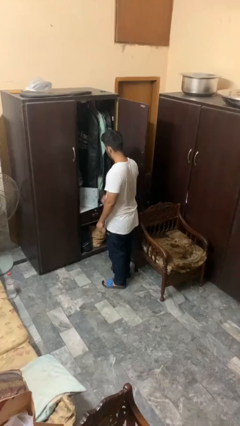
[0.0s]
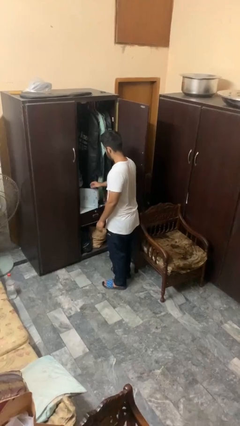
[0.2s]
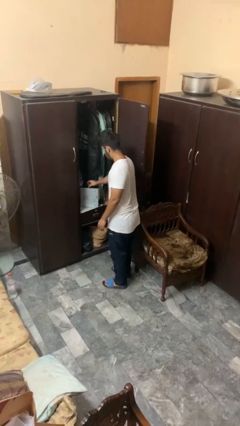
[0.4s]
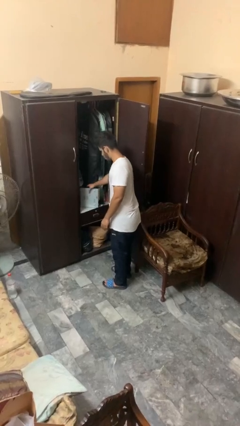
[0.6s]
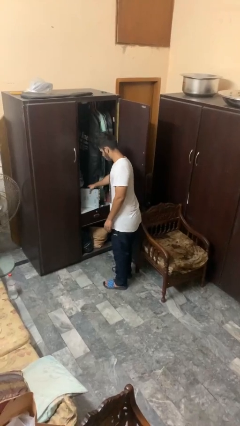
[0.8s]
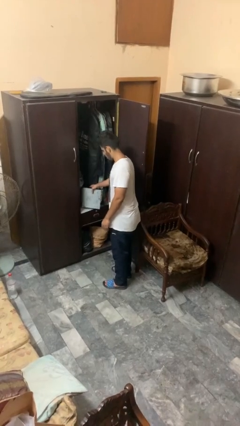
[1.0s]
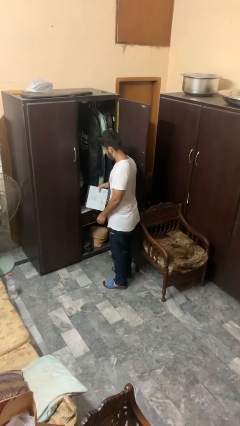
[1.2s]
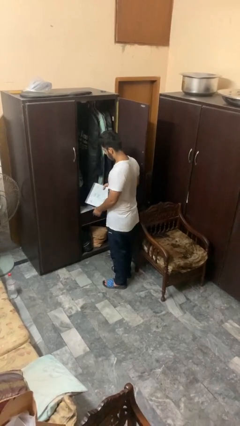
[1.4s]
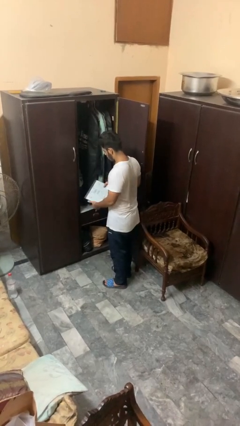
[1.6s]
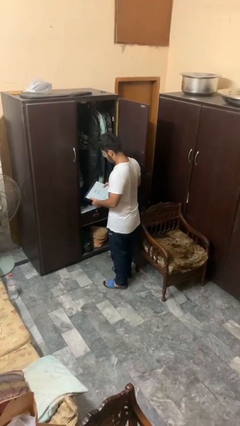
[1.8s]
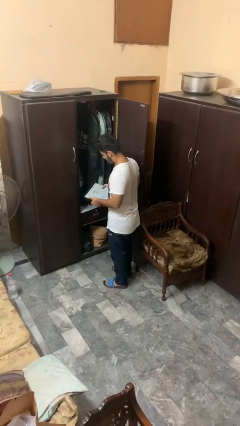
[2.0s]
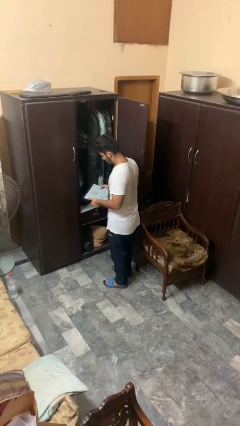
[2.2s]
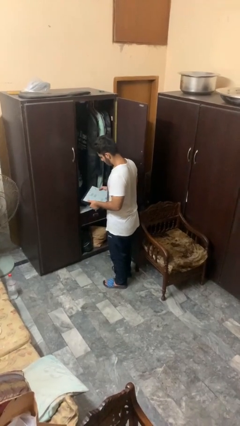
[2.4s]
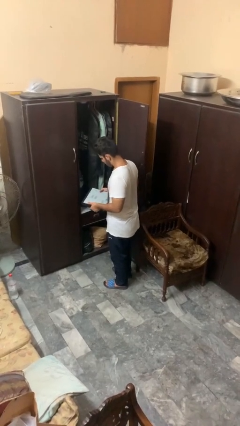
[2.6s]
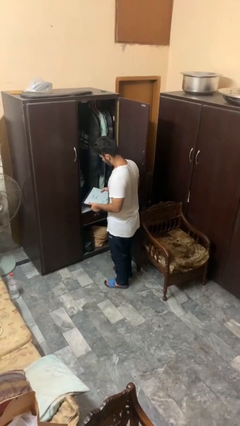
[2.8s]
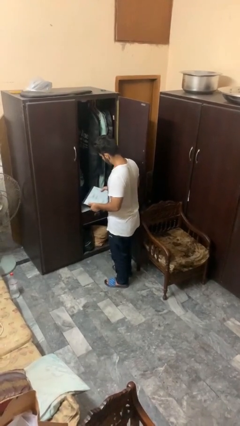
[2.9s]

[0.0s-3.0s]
person picks up object from cabinet

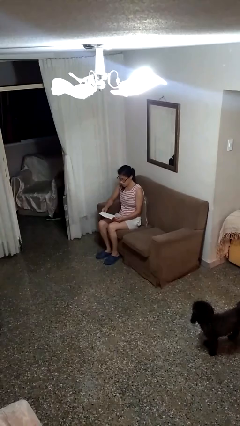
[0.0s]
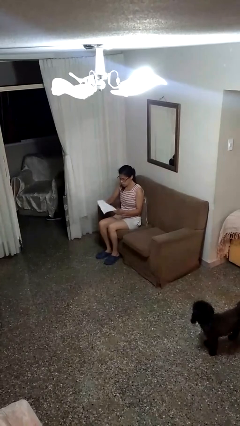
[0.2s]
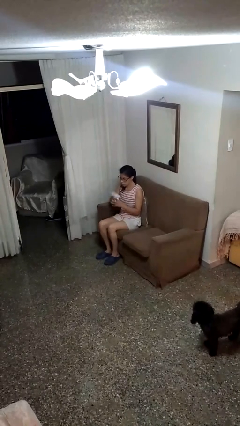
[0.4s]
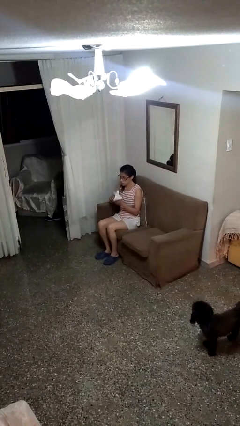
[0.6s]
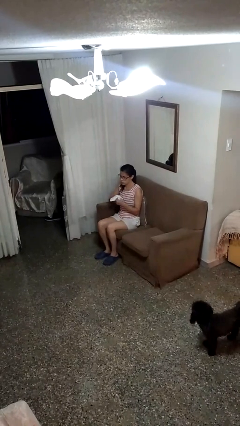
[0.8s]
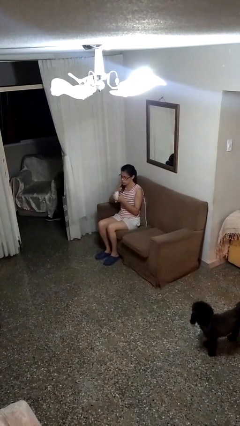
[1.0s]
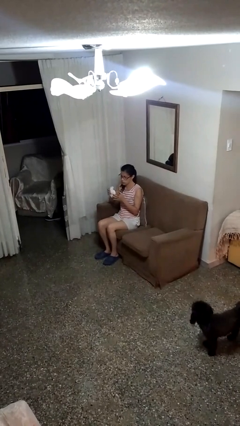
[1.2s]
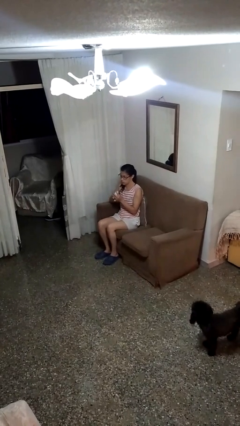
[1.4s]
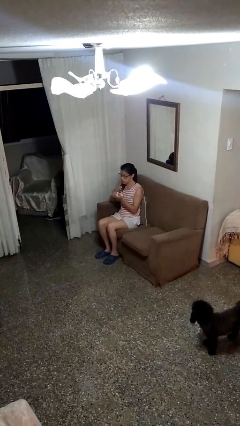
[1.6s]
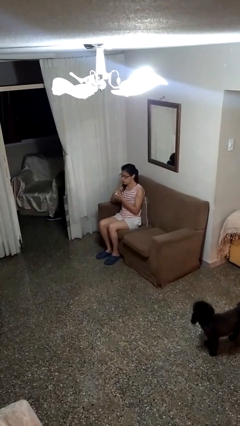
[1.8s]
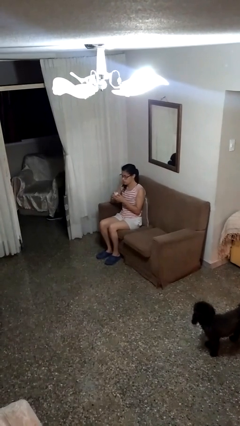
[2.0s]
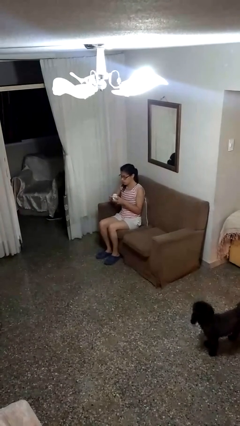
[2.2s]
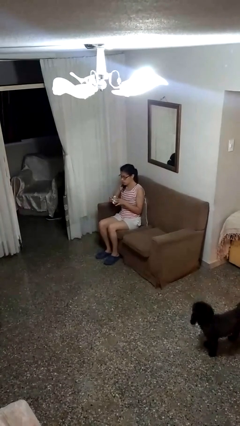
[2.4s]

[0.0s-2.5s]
person crumples paper

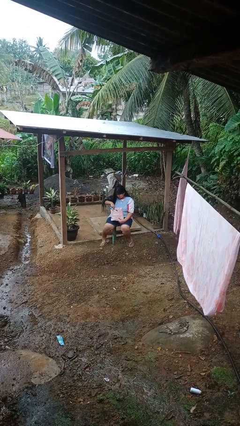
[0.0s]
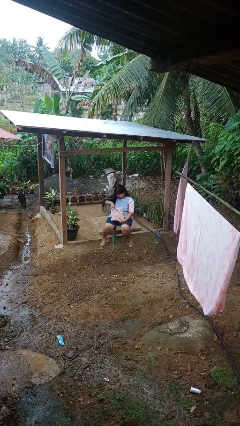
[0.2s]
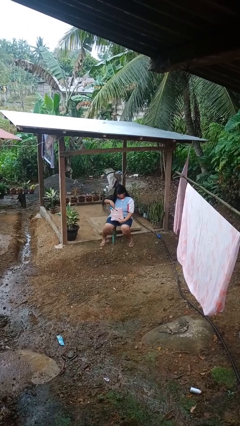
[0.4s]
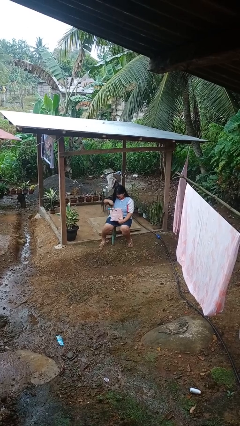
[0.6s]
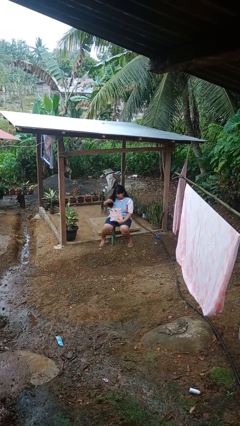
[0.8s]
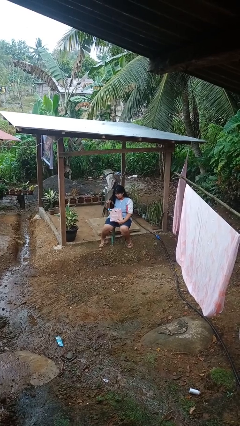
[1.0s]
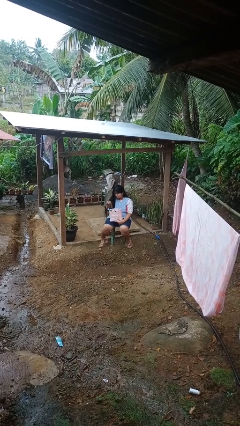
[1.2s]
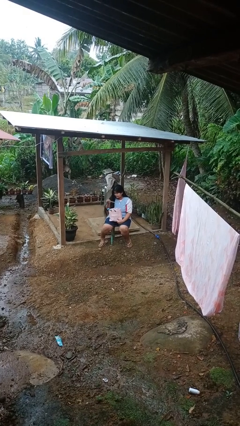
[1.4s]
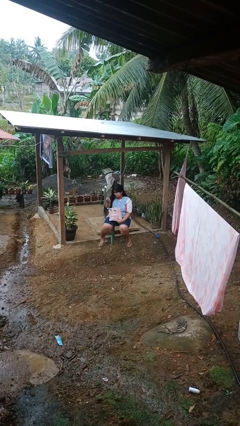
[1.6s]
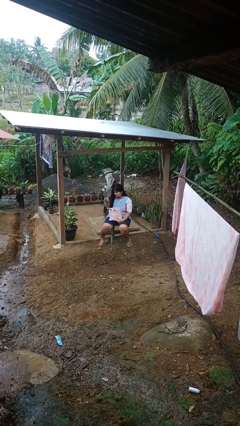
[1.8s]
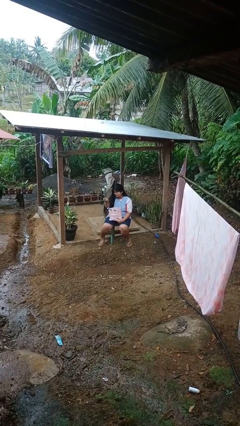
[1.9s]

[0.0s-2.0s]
person takes object from bag

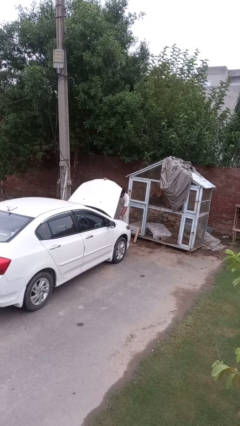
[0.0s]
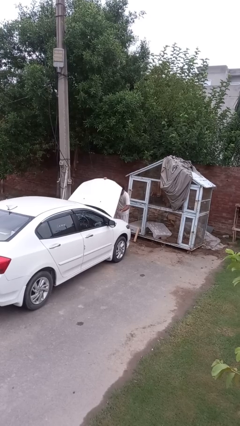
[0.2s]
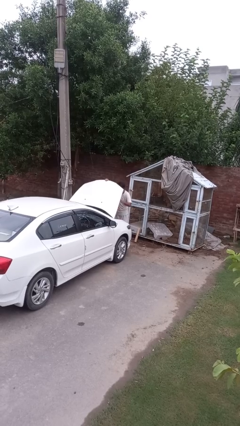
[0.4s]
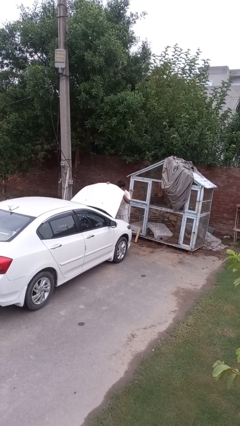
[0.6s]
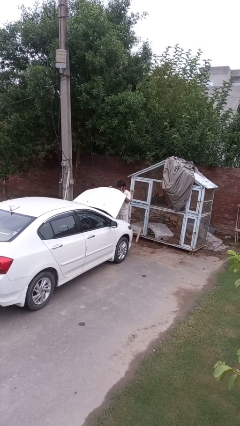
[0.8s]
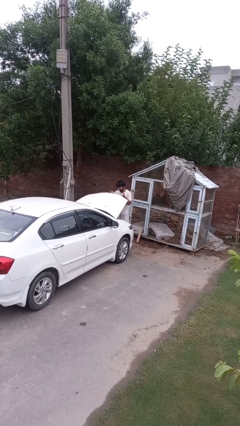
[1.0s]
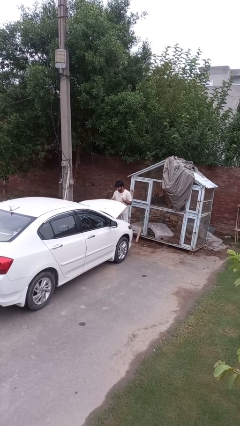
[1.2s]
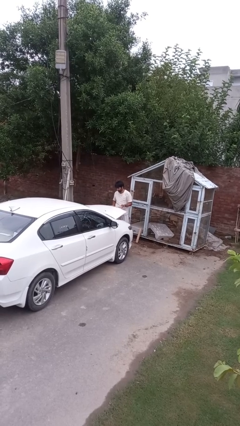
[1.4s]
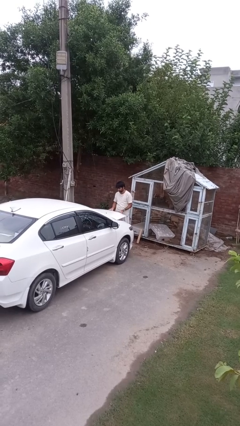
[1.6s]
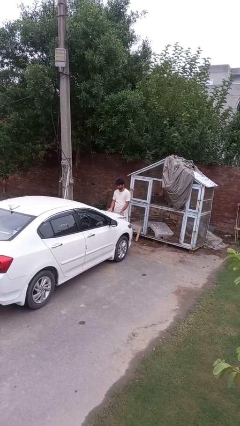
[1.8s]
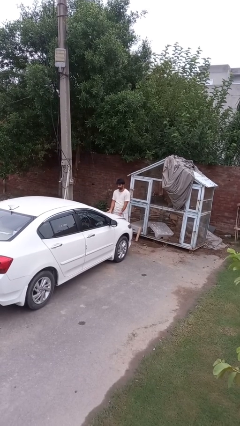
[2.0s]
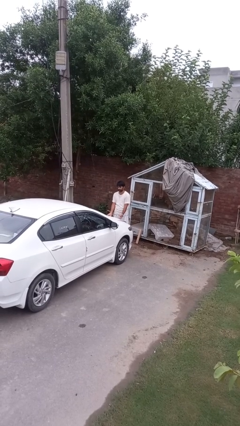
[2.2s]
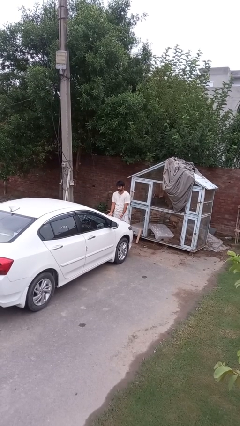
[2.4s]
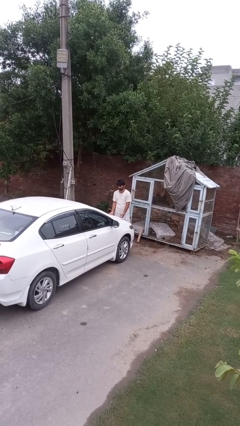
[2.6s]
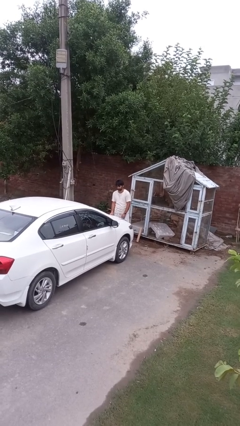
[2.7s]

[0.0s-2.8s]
person closes car hood

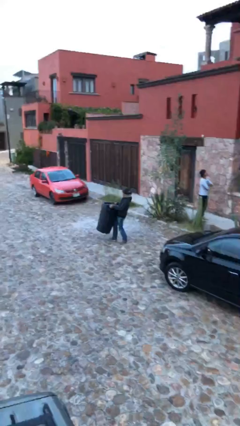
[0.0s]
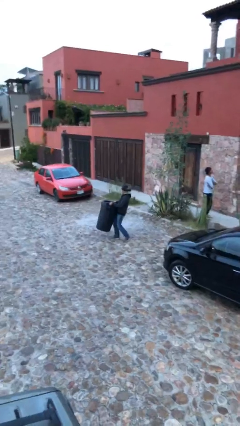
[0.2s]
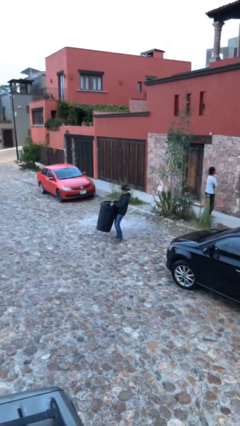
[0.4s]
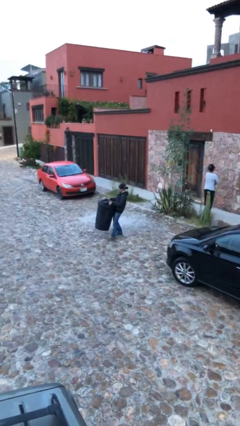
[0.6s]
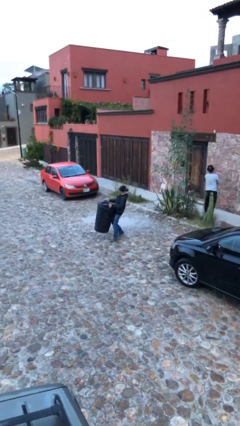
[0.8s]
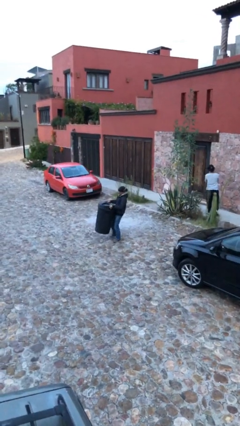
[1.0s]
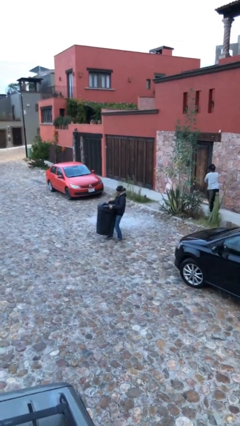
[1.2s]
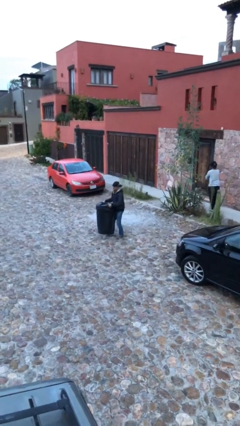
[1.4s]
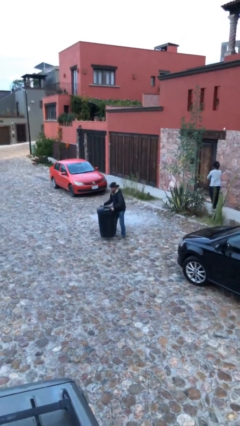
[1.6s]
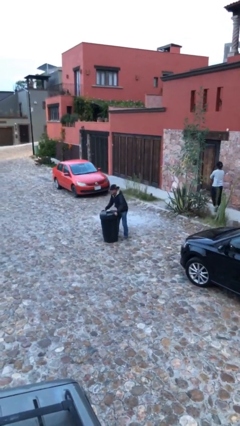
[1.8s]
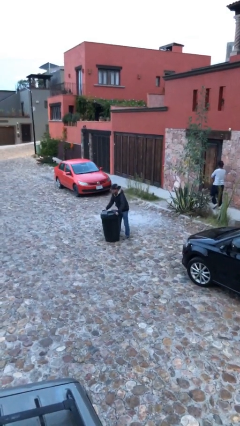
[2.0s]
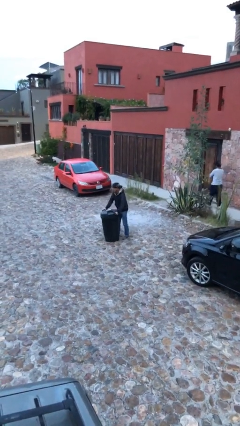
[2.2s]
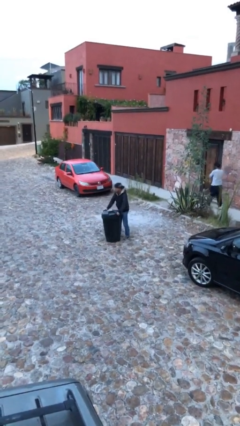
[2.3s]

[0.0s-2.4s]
person puts down object on floor

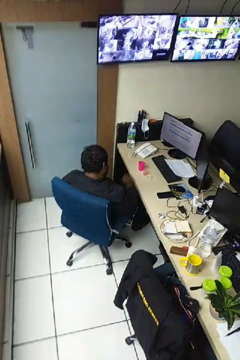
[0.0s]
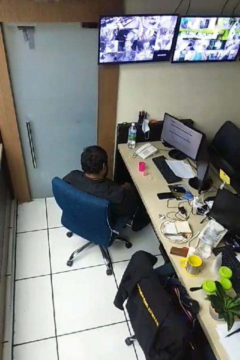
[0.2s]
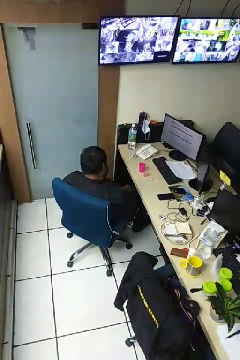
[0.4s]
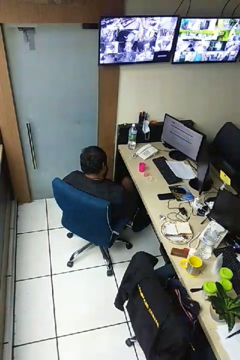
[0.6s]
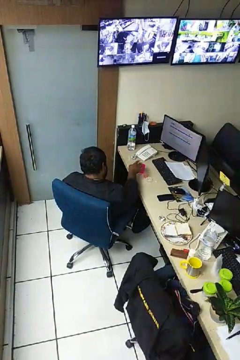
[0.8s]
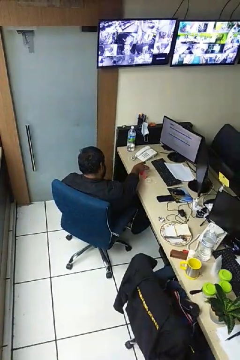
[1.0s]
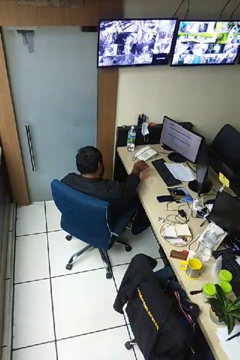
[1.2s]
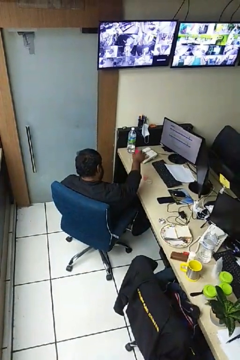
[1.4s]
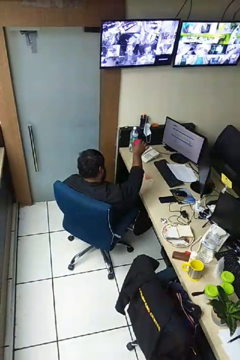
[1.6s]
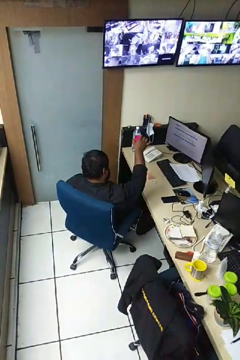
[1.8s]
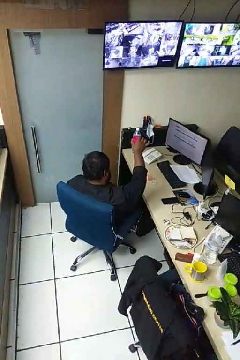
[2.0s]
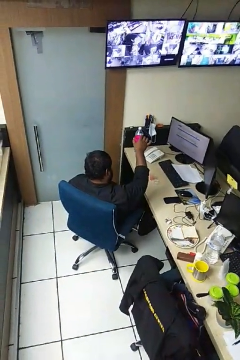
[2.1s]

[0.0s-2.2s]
person picks up object from table

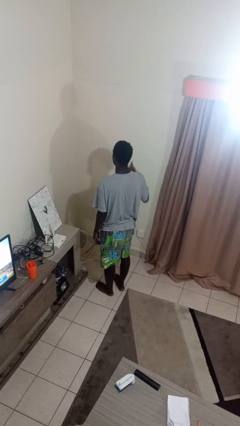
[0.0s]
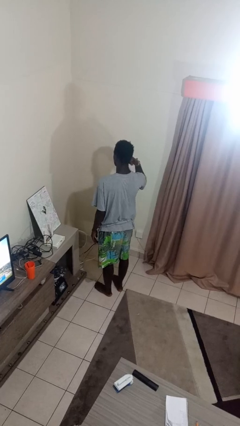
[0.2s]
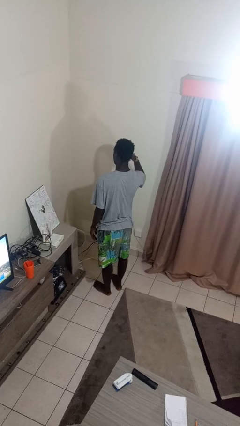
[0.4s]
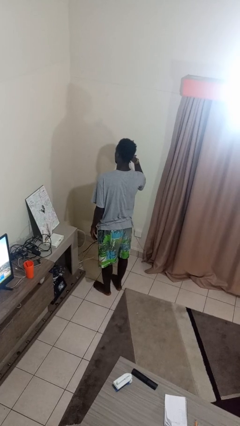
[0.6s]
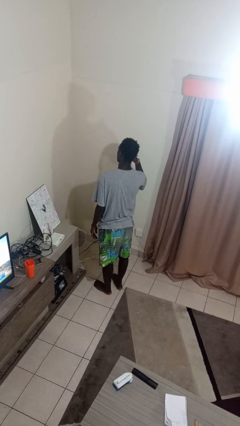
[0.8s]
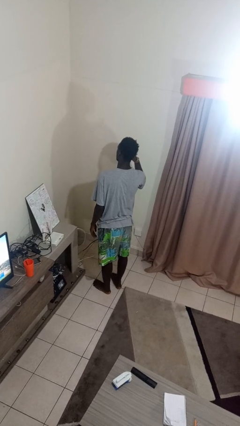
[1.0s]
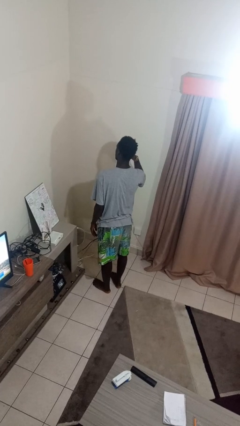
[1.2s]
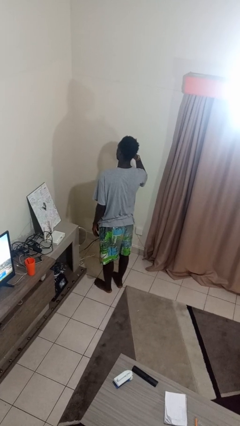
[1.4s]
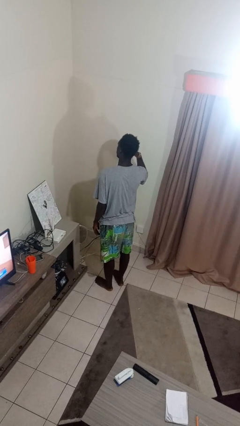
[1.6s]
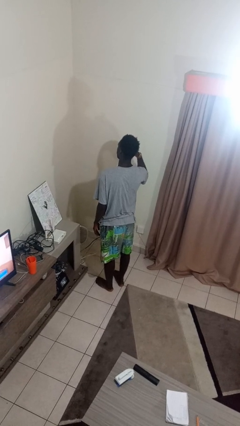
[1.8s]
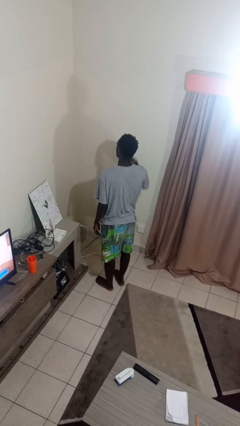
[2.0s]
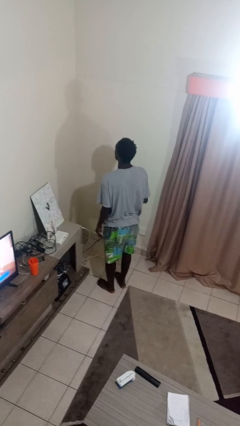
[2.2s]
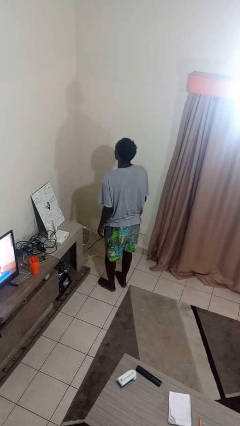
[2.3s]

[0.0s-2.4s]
person gestures call me

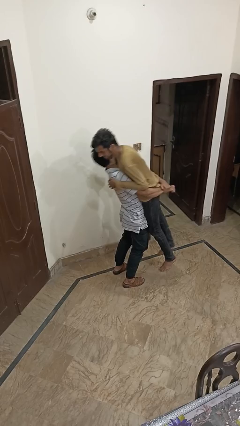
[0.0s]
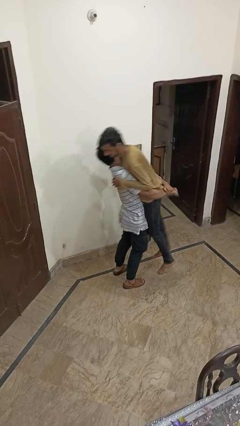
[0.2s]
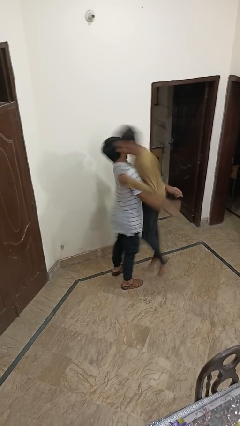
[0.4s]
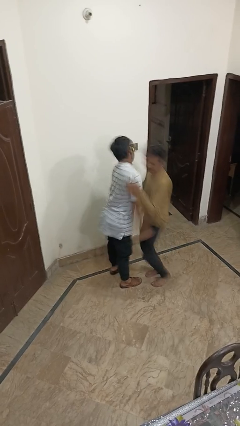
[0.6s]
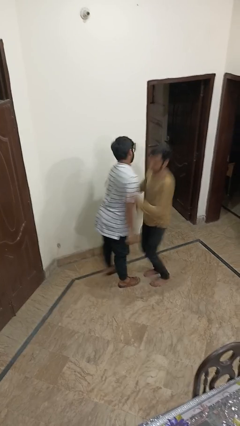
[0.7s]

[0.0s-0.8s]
person puts down person
